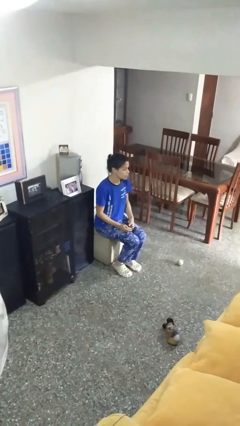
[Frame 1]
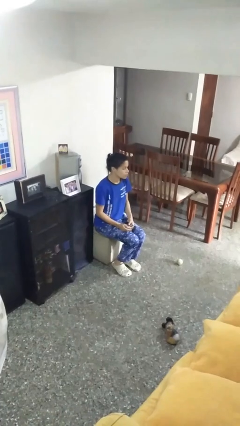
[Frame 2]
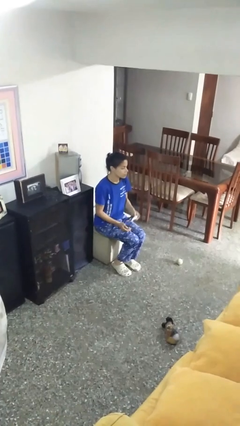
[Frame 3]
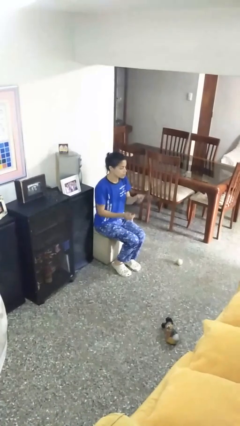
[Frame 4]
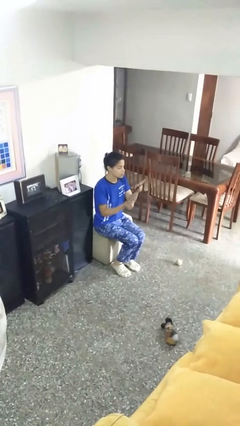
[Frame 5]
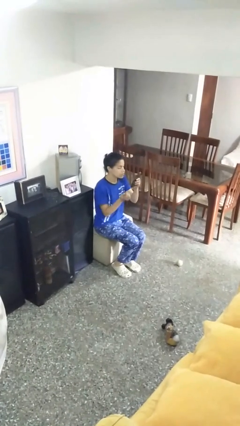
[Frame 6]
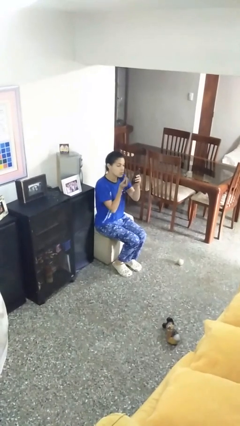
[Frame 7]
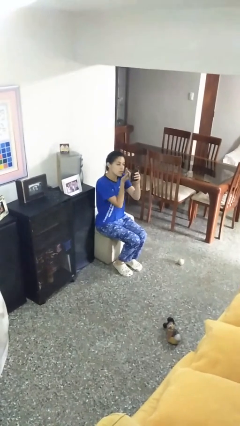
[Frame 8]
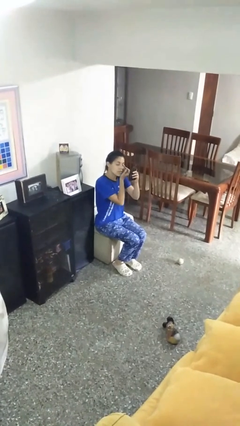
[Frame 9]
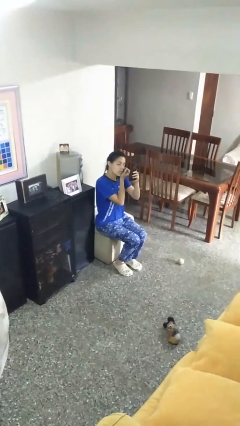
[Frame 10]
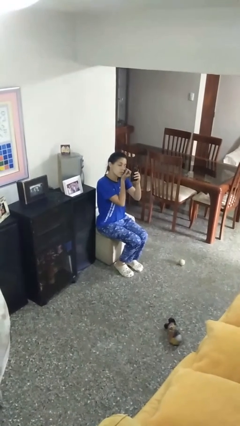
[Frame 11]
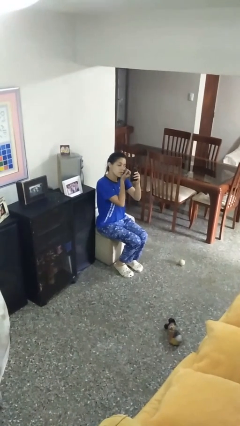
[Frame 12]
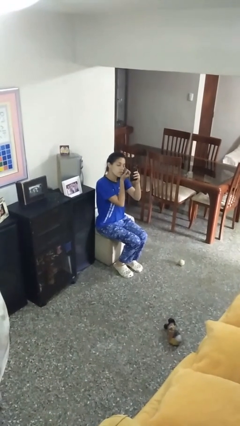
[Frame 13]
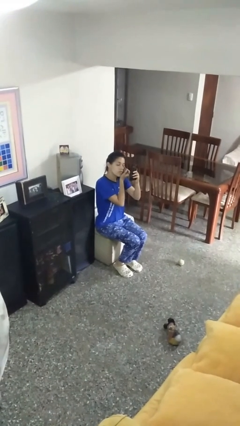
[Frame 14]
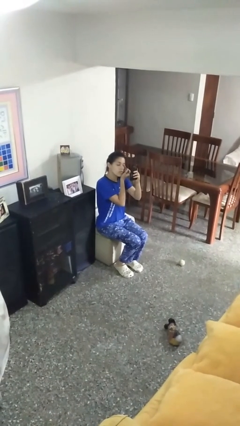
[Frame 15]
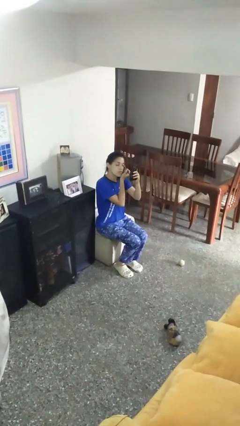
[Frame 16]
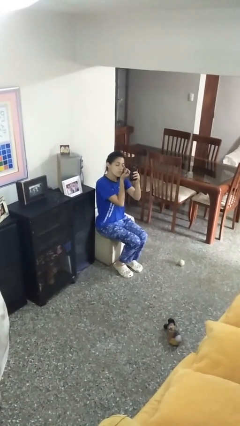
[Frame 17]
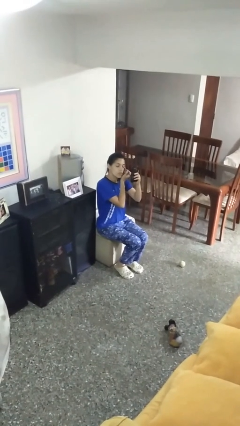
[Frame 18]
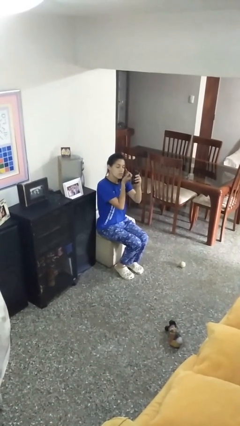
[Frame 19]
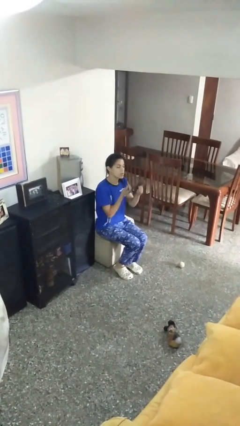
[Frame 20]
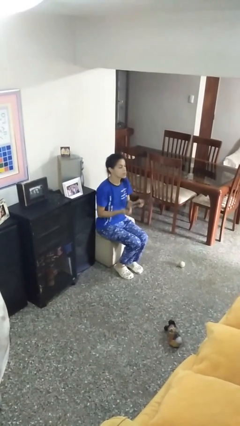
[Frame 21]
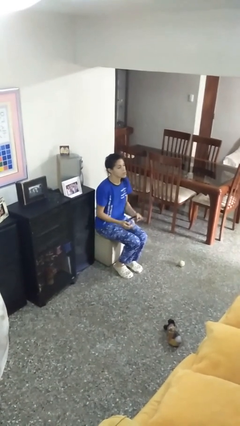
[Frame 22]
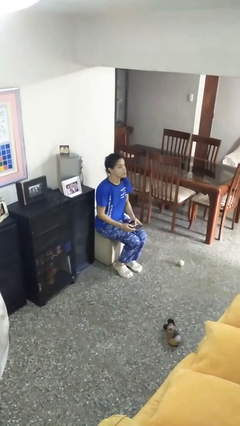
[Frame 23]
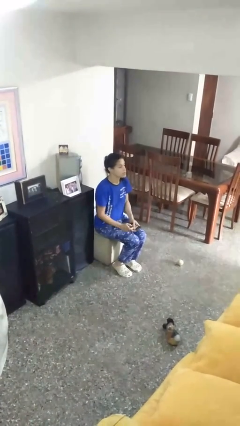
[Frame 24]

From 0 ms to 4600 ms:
person applies eye makeup

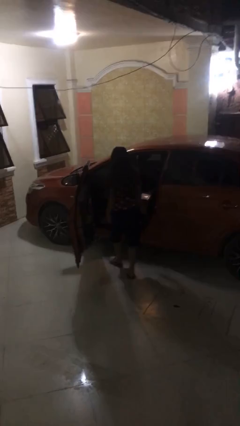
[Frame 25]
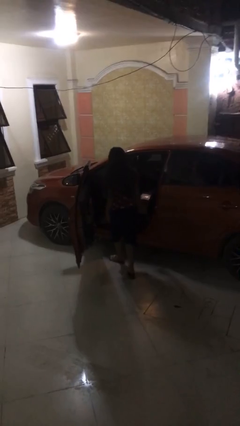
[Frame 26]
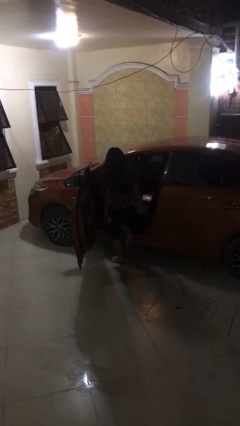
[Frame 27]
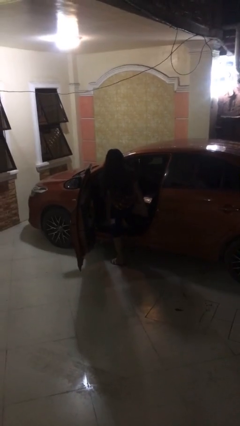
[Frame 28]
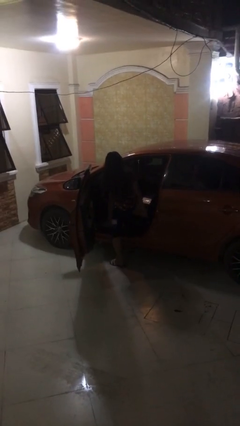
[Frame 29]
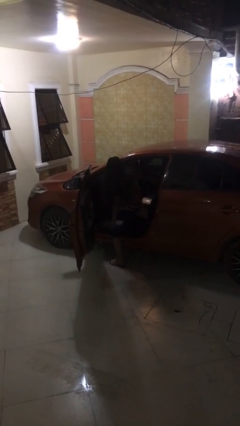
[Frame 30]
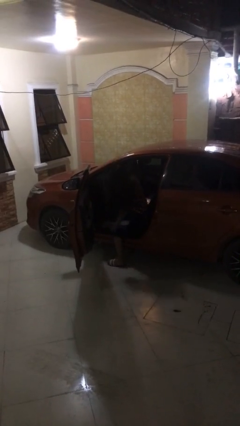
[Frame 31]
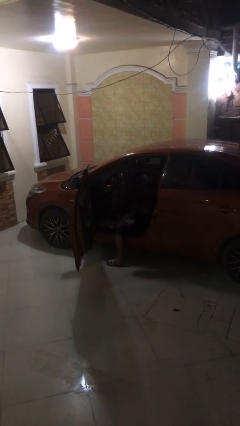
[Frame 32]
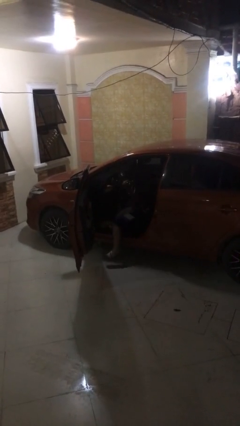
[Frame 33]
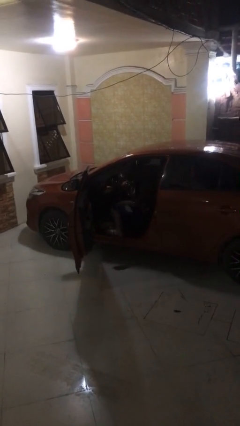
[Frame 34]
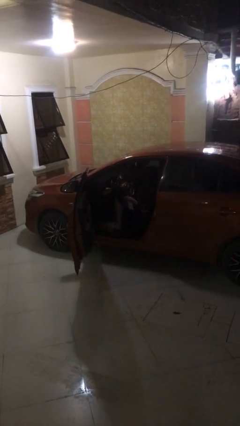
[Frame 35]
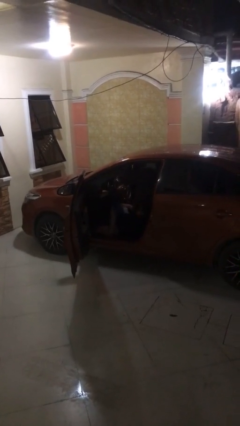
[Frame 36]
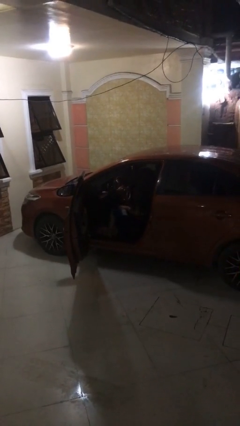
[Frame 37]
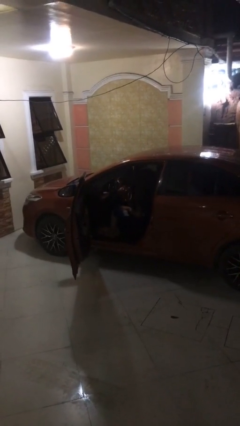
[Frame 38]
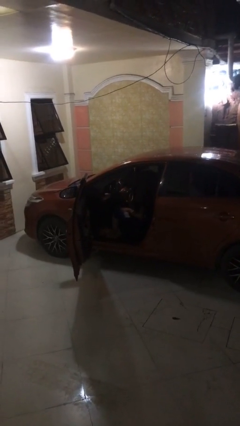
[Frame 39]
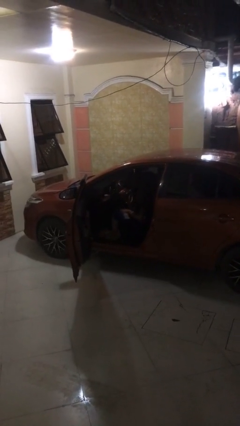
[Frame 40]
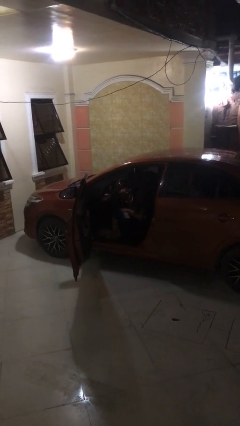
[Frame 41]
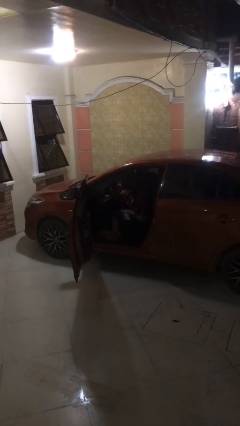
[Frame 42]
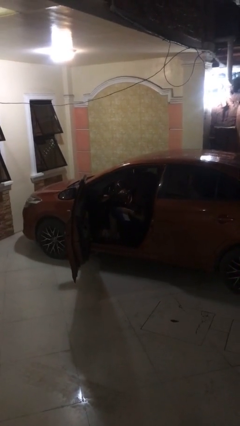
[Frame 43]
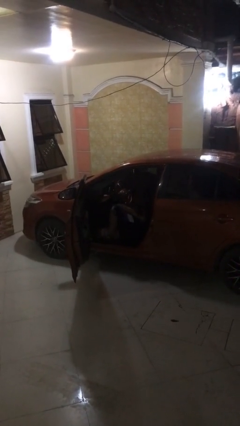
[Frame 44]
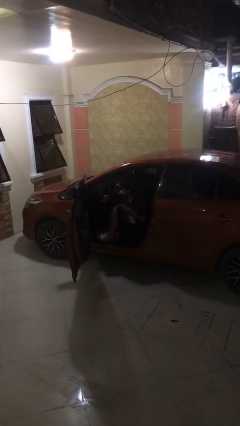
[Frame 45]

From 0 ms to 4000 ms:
person enters car

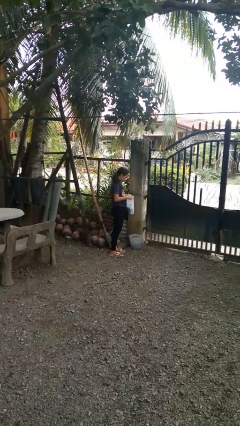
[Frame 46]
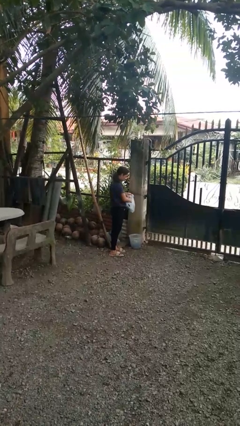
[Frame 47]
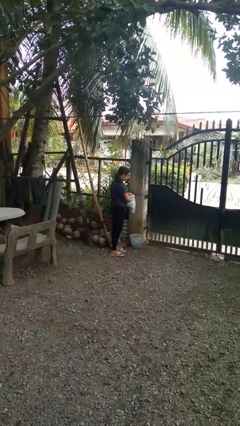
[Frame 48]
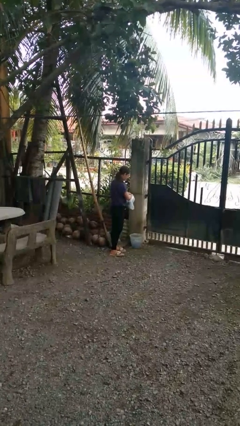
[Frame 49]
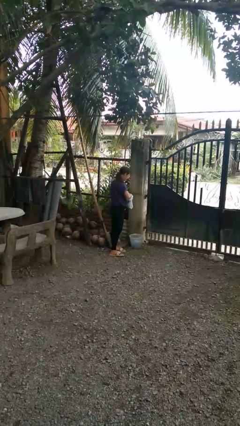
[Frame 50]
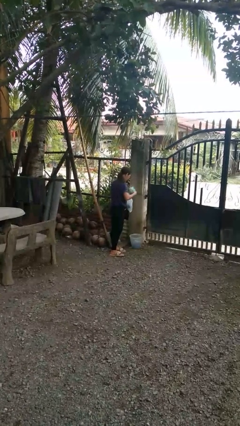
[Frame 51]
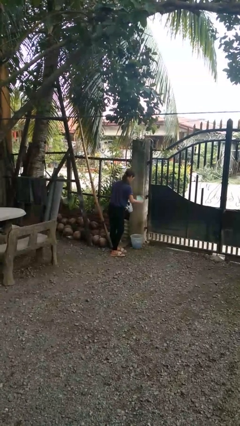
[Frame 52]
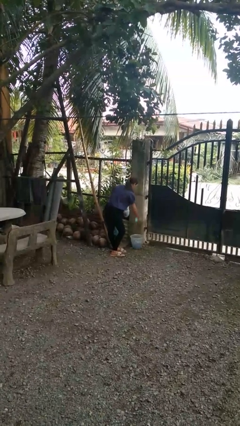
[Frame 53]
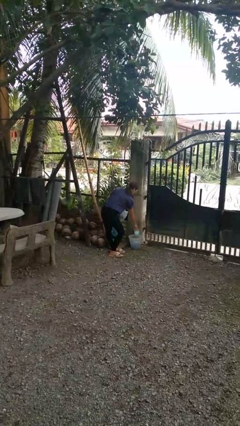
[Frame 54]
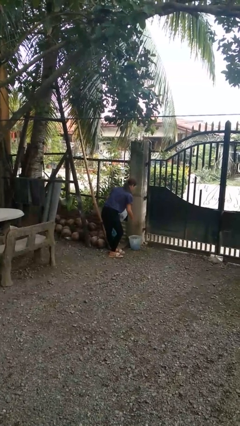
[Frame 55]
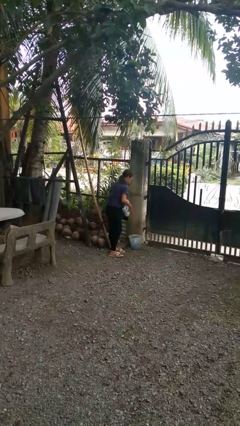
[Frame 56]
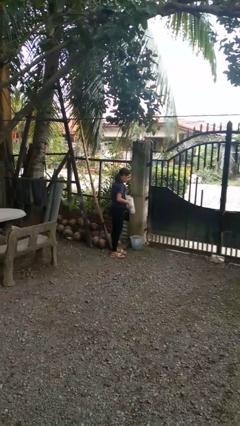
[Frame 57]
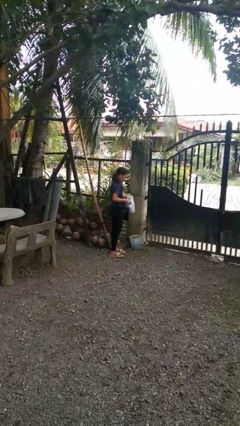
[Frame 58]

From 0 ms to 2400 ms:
person discards trash

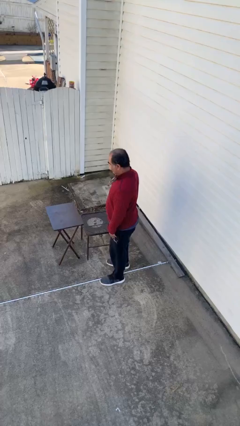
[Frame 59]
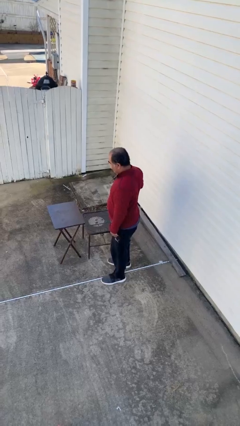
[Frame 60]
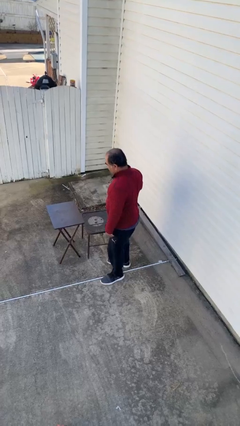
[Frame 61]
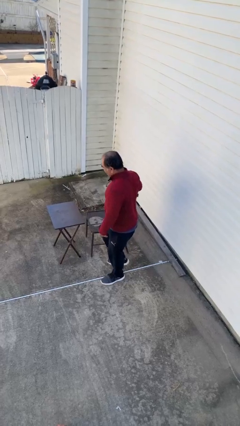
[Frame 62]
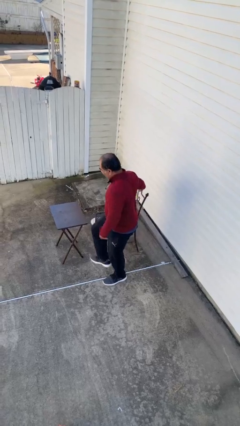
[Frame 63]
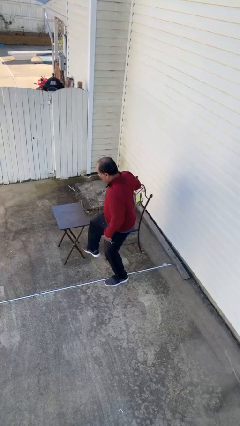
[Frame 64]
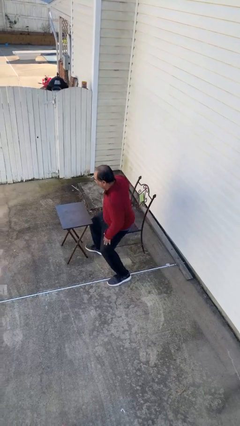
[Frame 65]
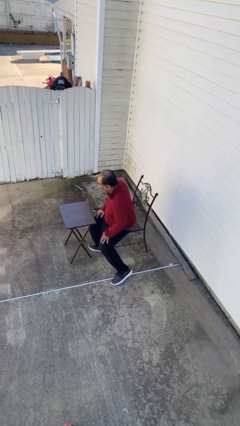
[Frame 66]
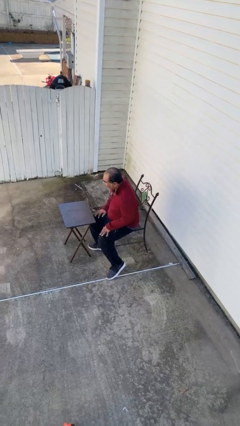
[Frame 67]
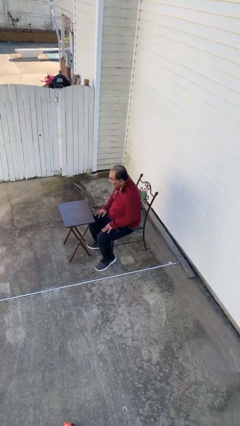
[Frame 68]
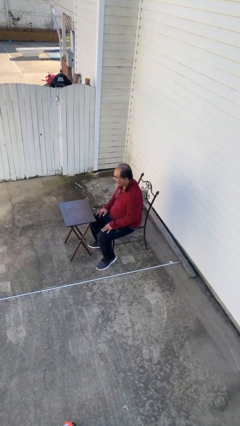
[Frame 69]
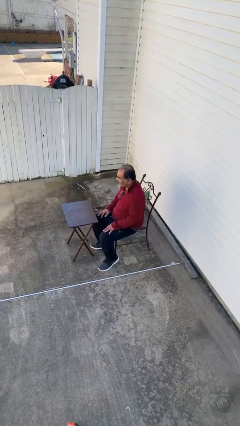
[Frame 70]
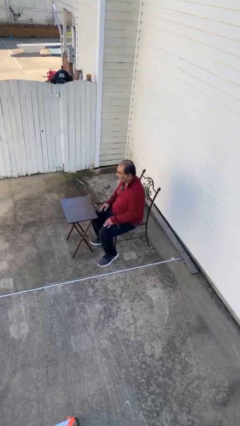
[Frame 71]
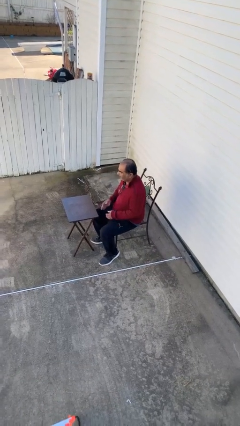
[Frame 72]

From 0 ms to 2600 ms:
person sits down

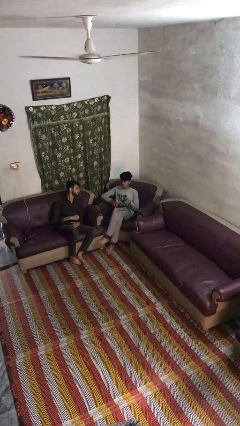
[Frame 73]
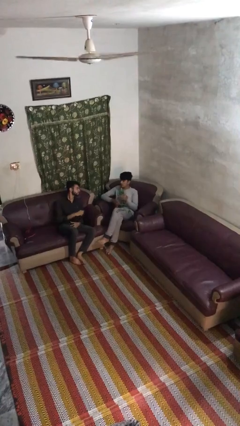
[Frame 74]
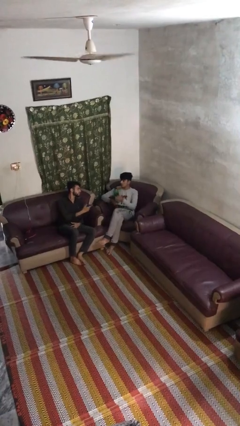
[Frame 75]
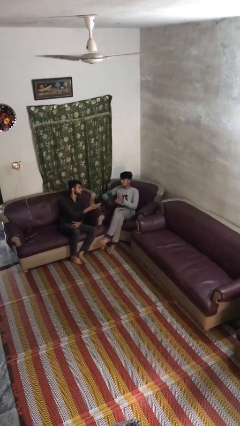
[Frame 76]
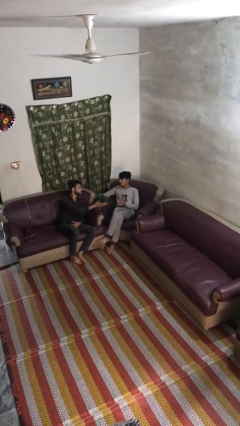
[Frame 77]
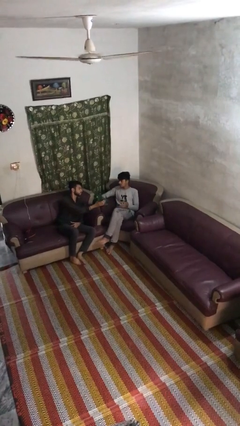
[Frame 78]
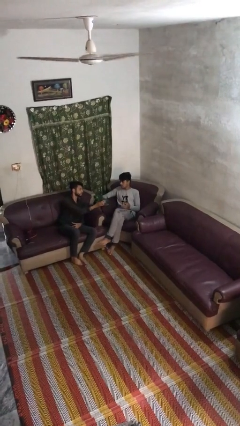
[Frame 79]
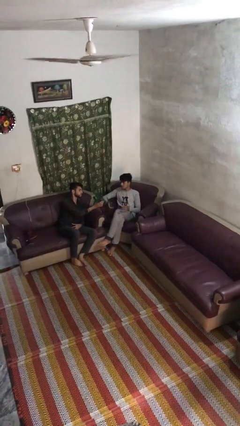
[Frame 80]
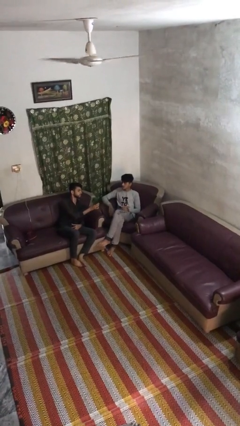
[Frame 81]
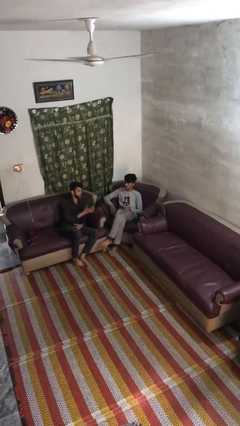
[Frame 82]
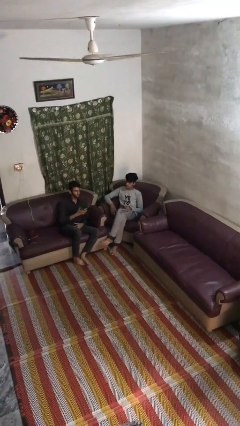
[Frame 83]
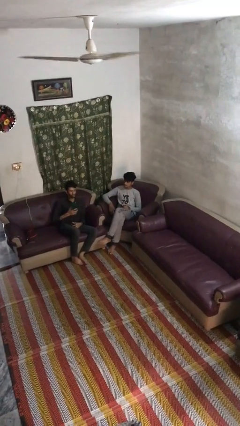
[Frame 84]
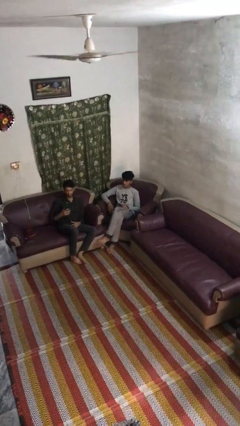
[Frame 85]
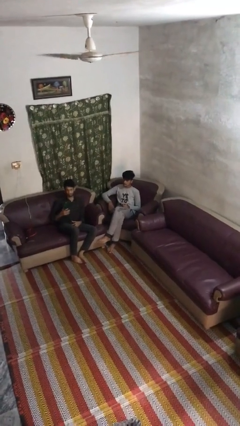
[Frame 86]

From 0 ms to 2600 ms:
person transfers object to person

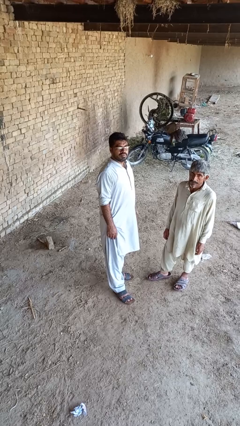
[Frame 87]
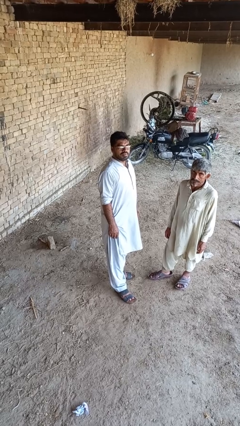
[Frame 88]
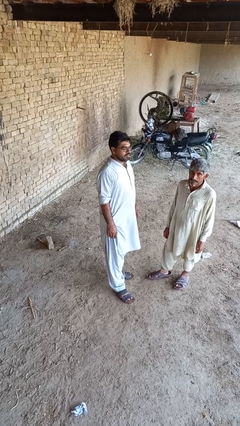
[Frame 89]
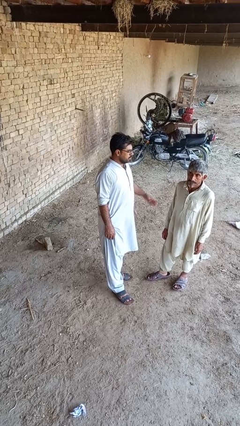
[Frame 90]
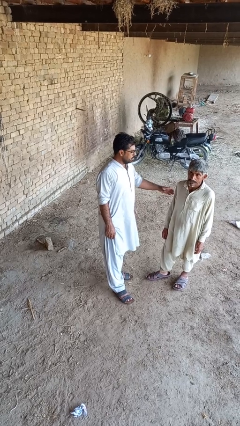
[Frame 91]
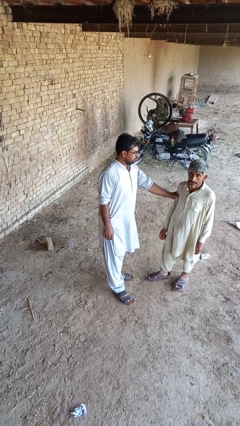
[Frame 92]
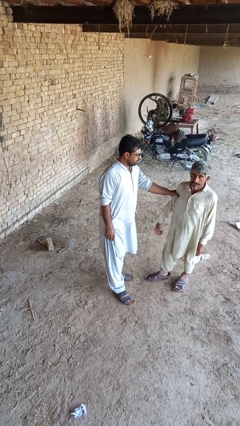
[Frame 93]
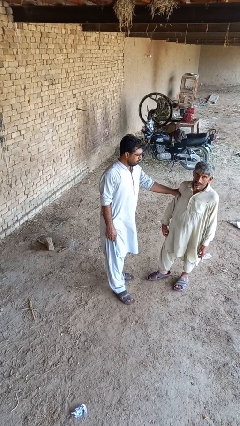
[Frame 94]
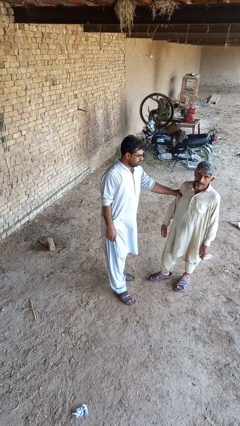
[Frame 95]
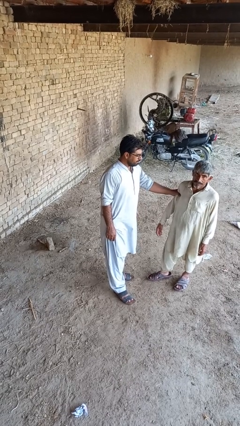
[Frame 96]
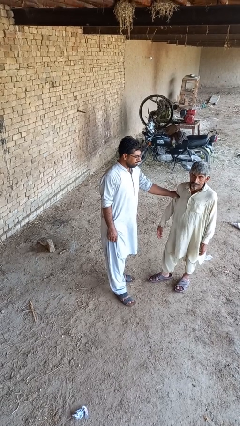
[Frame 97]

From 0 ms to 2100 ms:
person grabs person by bicep
